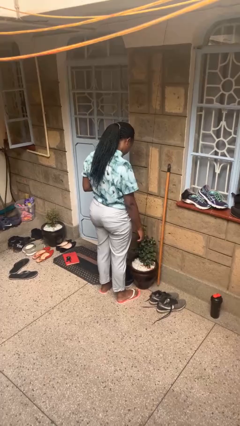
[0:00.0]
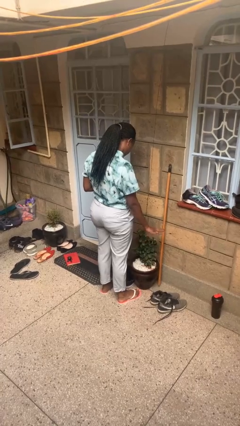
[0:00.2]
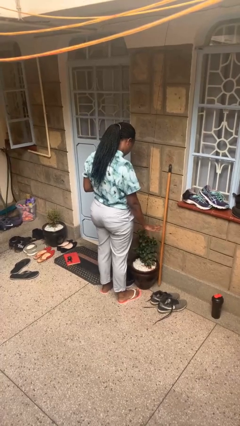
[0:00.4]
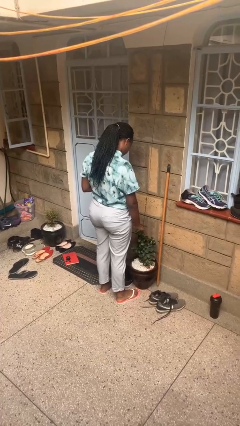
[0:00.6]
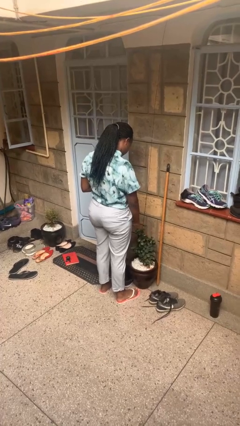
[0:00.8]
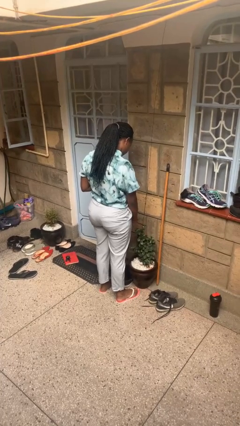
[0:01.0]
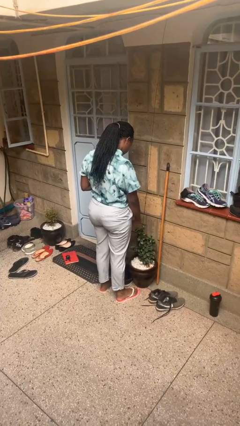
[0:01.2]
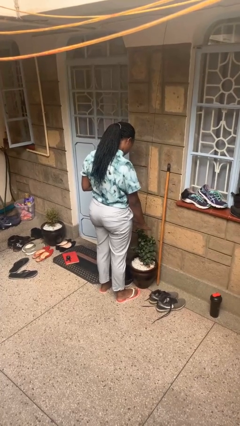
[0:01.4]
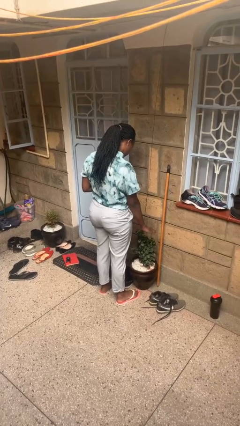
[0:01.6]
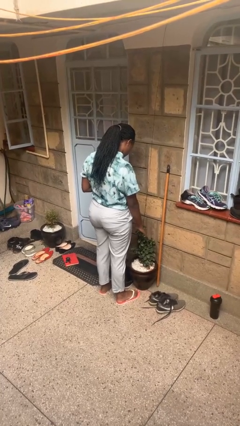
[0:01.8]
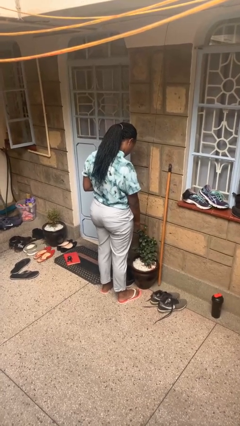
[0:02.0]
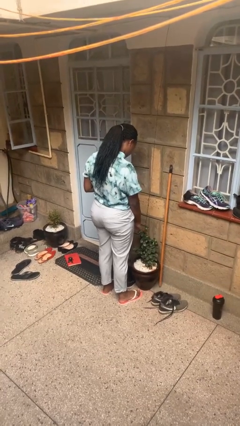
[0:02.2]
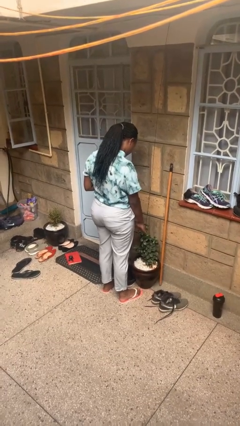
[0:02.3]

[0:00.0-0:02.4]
person waves hand over object

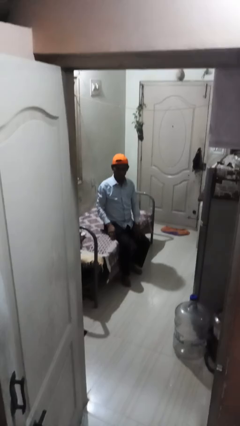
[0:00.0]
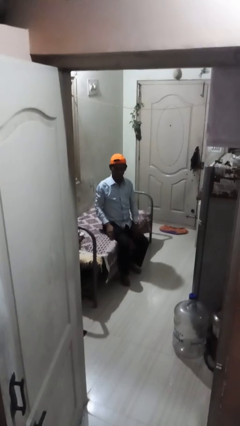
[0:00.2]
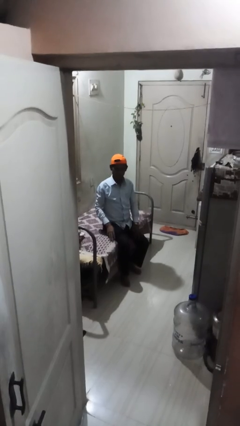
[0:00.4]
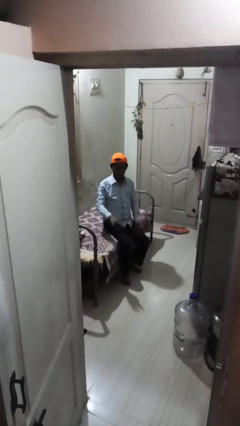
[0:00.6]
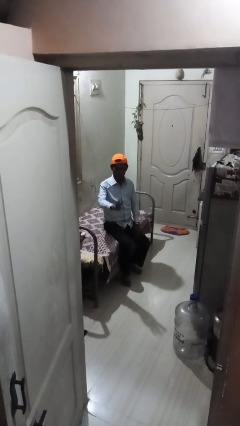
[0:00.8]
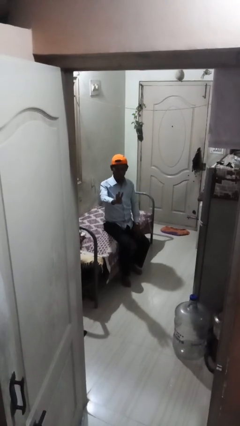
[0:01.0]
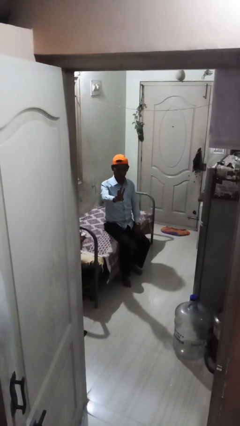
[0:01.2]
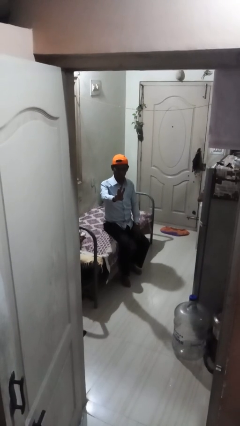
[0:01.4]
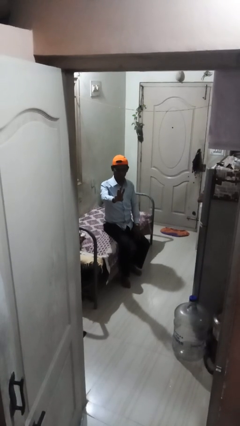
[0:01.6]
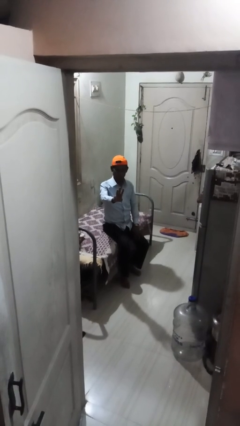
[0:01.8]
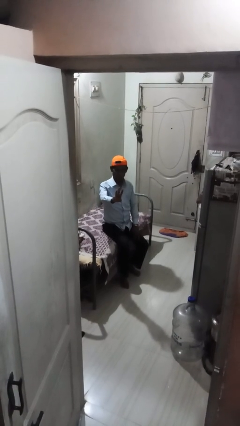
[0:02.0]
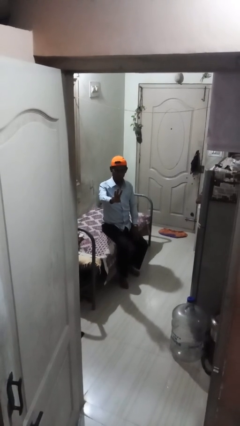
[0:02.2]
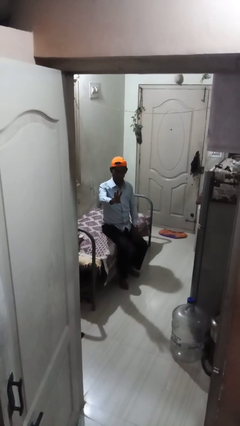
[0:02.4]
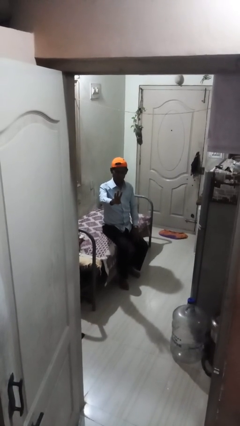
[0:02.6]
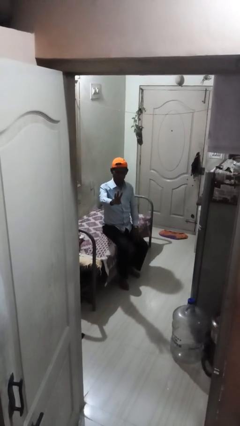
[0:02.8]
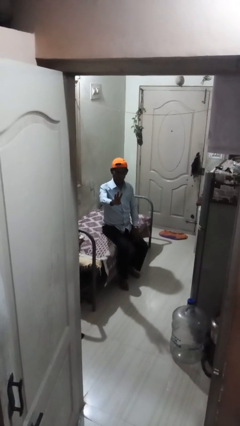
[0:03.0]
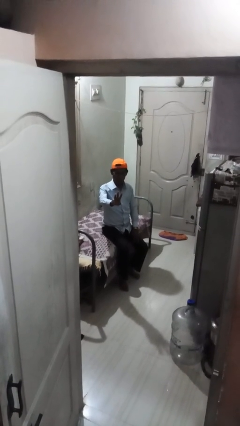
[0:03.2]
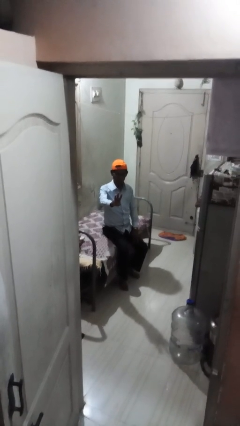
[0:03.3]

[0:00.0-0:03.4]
person gestures number three

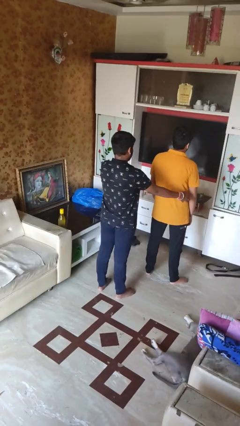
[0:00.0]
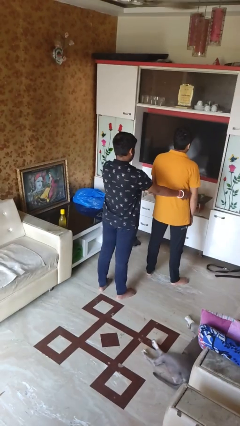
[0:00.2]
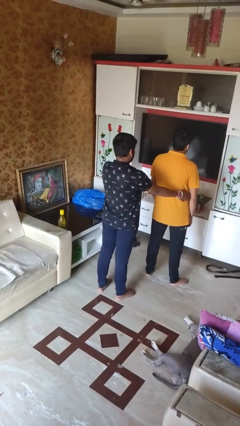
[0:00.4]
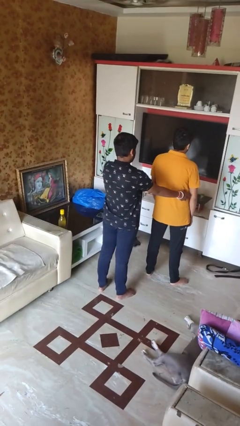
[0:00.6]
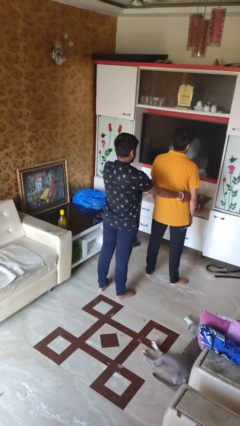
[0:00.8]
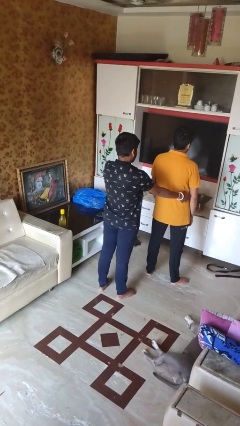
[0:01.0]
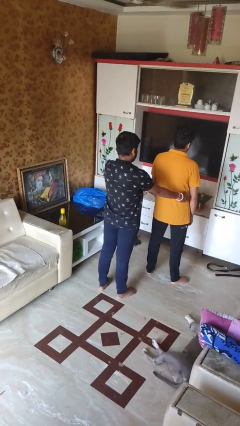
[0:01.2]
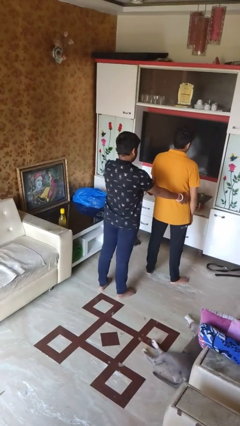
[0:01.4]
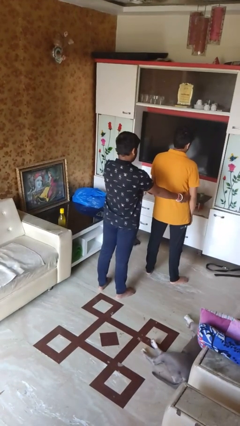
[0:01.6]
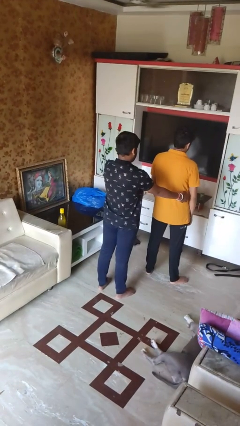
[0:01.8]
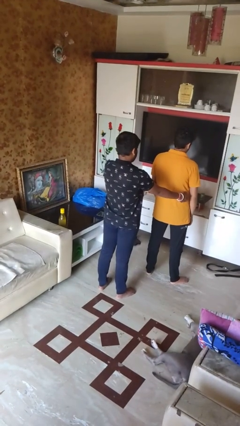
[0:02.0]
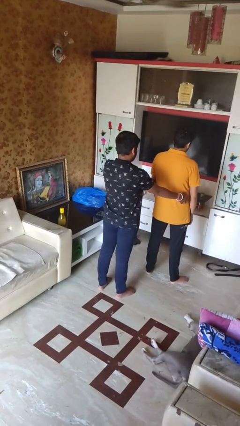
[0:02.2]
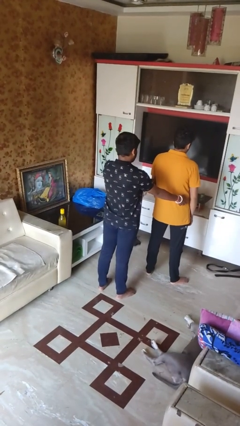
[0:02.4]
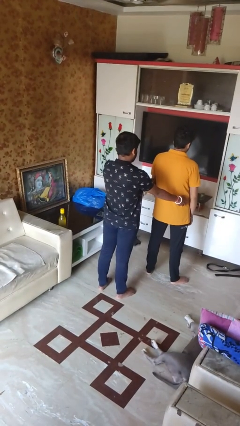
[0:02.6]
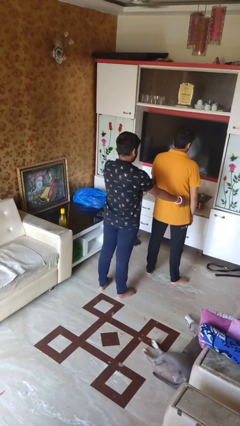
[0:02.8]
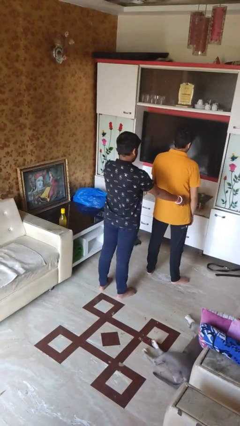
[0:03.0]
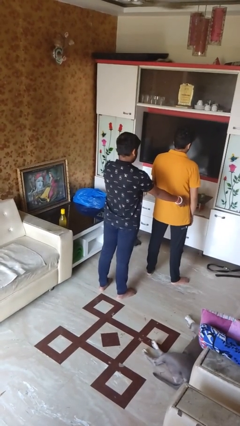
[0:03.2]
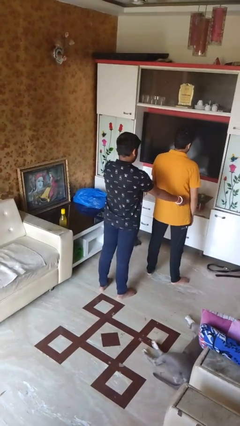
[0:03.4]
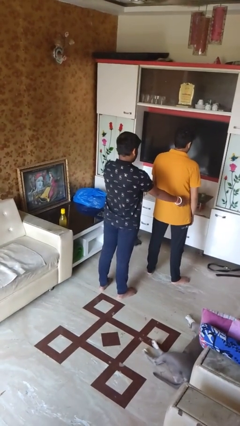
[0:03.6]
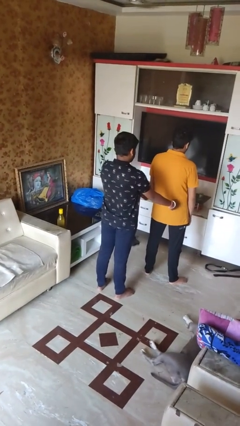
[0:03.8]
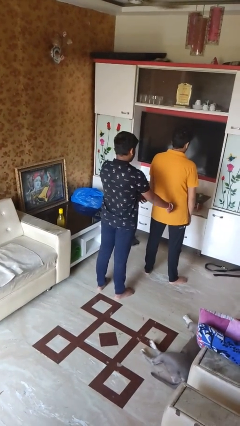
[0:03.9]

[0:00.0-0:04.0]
person tickles person

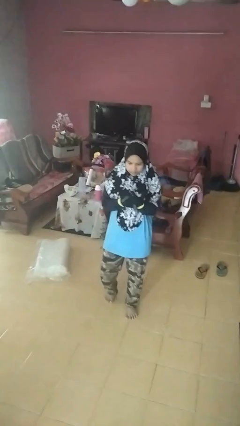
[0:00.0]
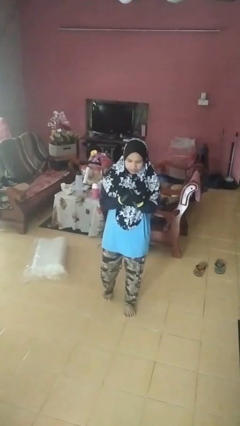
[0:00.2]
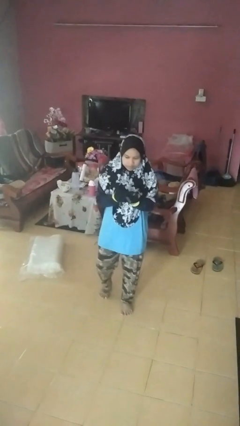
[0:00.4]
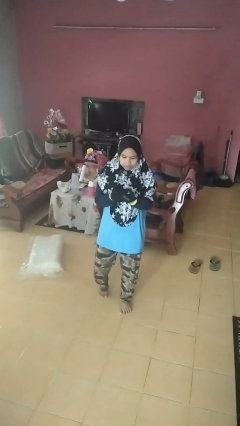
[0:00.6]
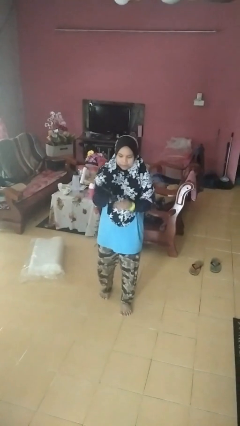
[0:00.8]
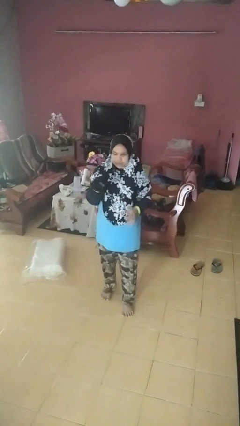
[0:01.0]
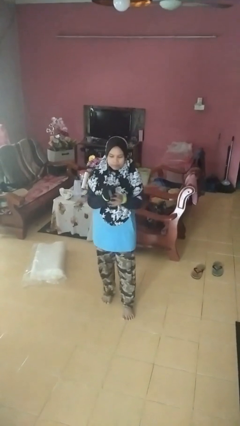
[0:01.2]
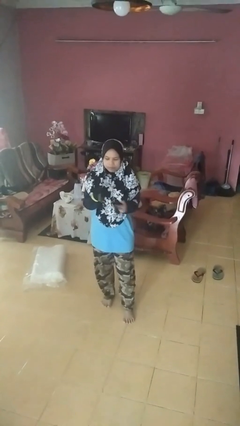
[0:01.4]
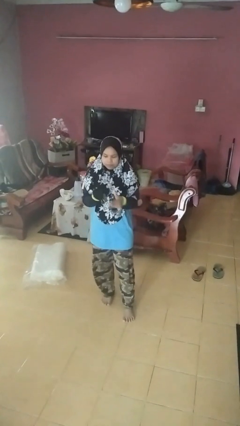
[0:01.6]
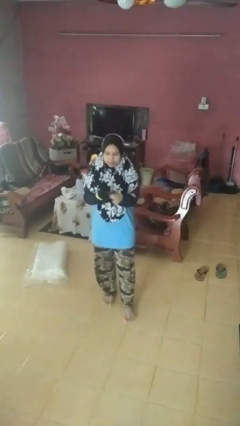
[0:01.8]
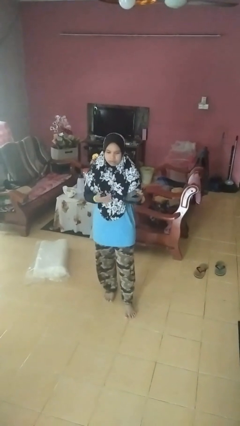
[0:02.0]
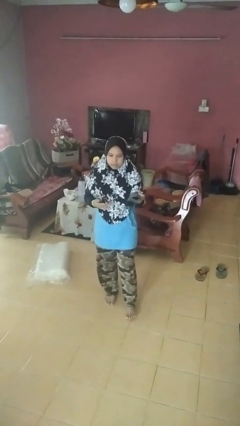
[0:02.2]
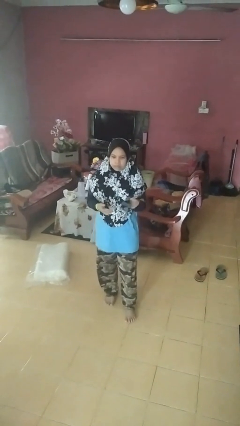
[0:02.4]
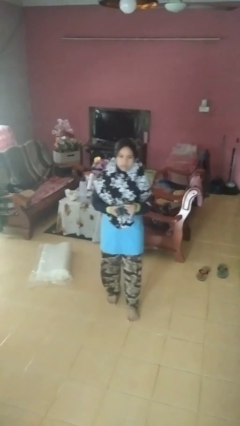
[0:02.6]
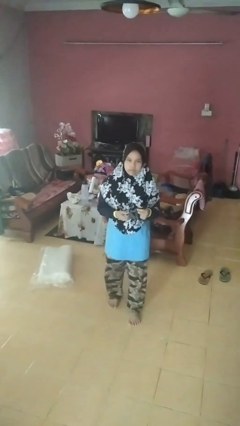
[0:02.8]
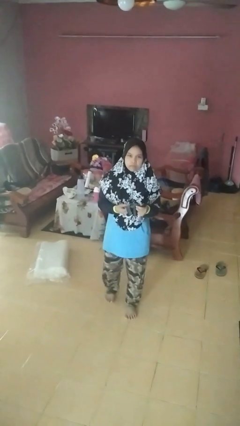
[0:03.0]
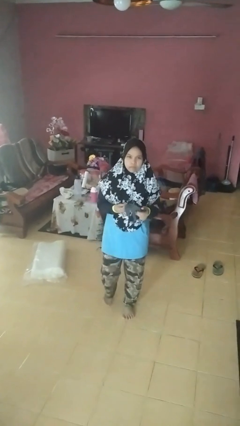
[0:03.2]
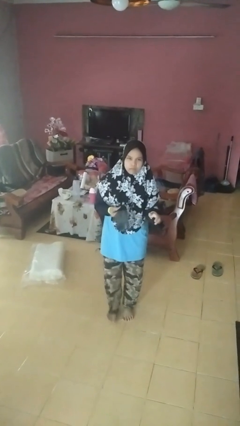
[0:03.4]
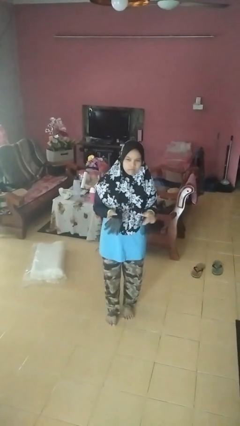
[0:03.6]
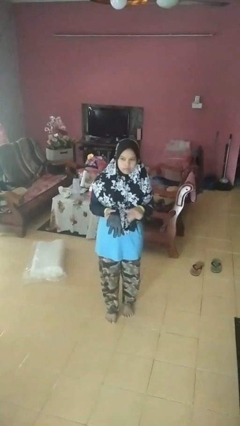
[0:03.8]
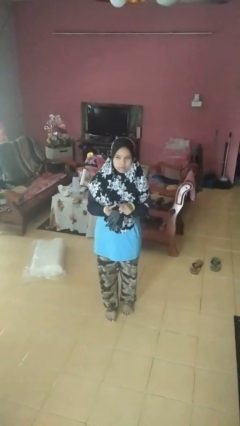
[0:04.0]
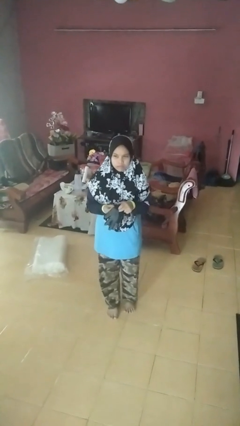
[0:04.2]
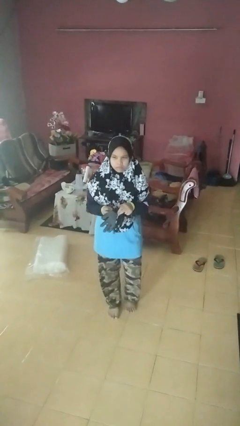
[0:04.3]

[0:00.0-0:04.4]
person takes off gloves

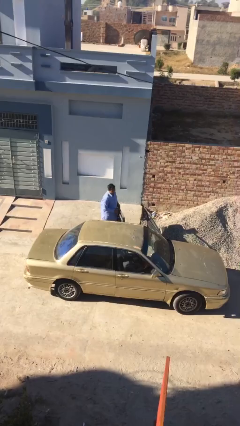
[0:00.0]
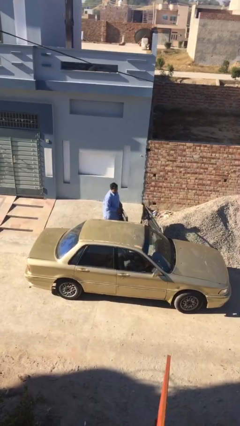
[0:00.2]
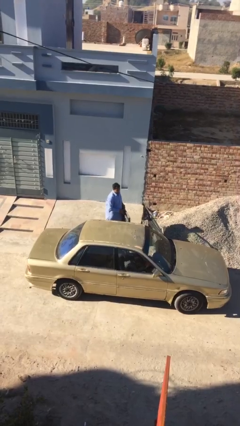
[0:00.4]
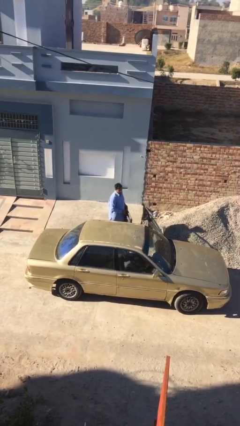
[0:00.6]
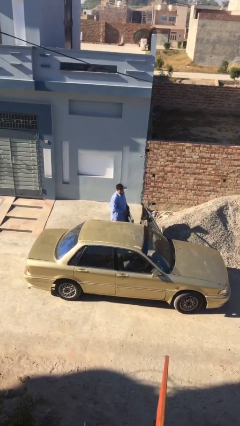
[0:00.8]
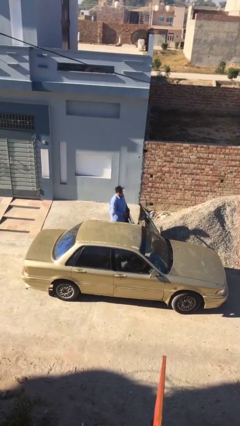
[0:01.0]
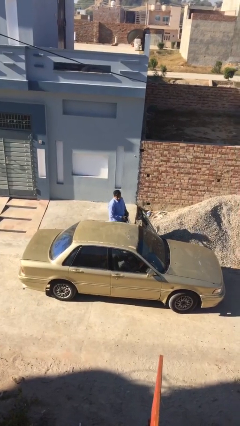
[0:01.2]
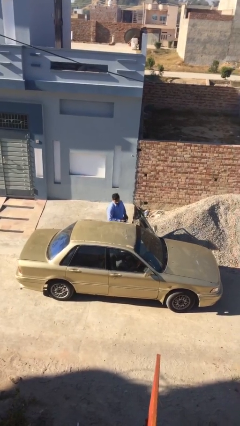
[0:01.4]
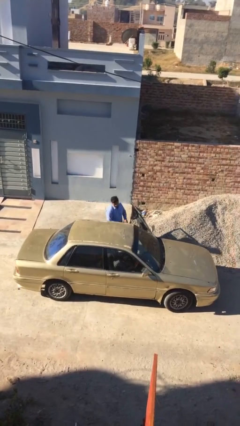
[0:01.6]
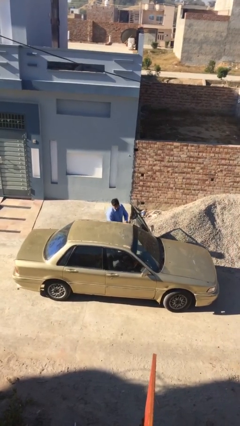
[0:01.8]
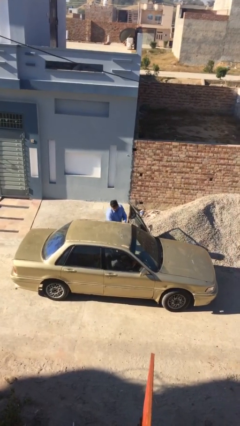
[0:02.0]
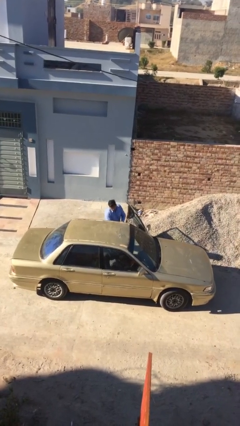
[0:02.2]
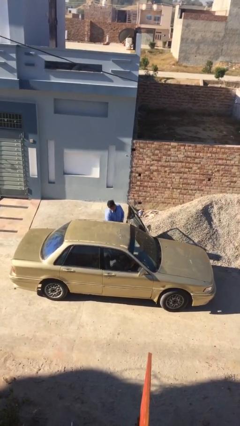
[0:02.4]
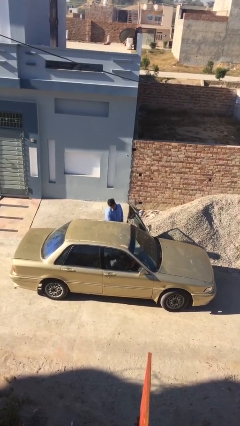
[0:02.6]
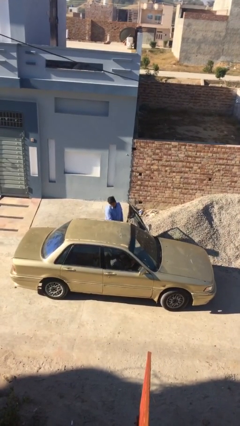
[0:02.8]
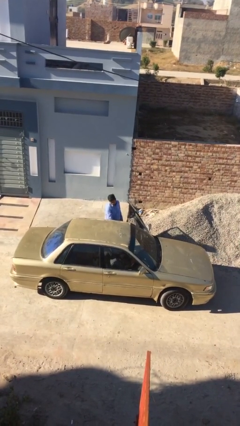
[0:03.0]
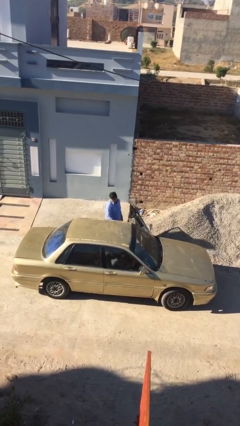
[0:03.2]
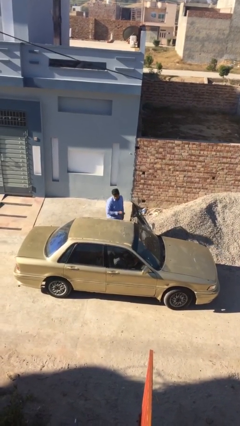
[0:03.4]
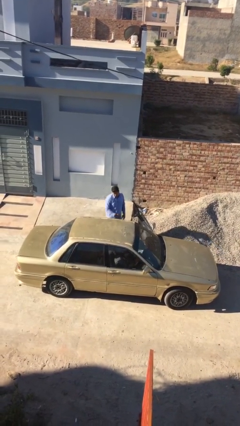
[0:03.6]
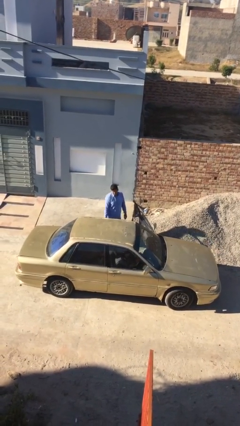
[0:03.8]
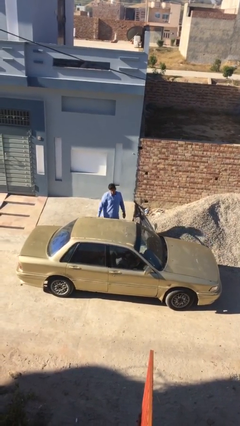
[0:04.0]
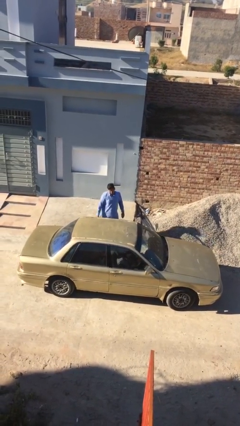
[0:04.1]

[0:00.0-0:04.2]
person loads car
